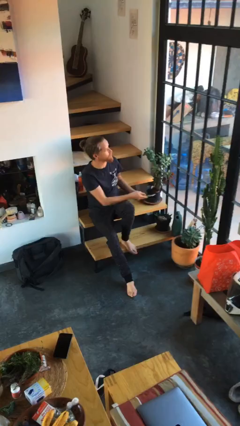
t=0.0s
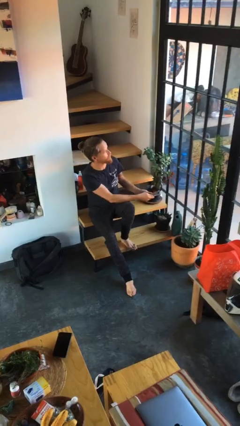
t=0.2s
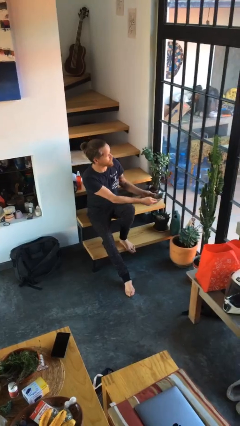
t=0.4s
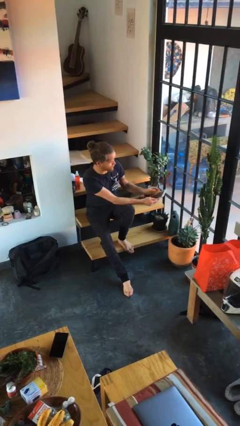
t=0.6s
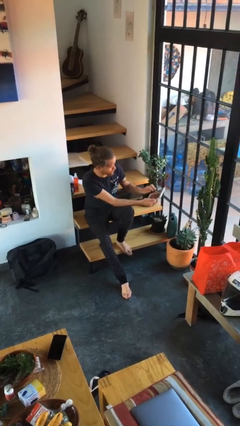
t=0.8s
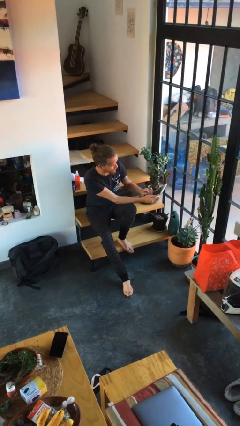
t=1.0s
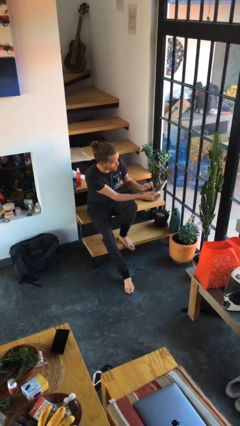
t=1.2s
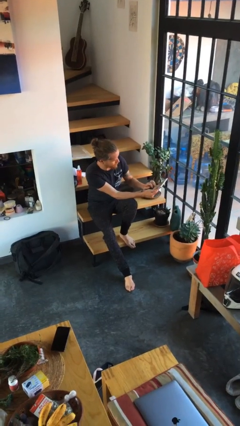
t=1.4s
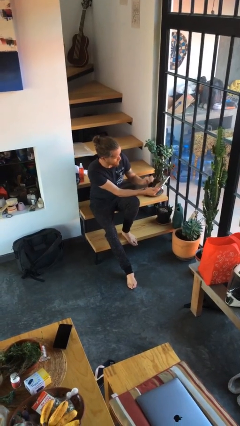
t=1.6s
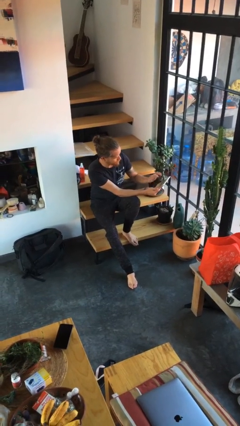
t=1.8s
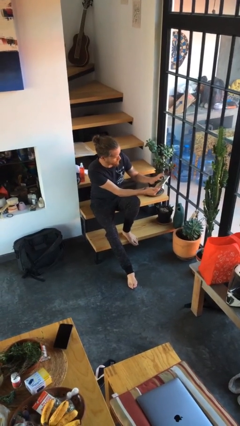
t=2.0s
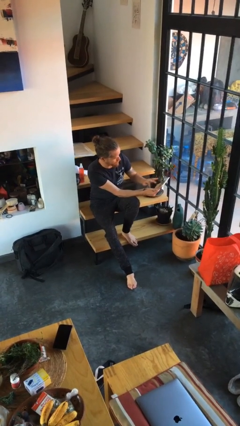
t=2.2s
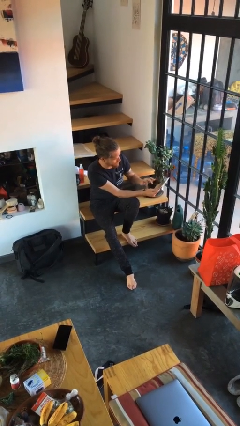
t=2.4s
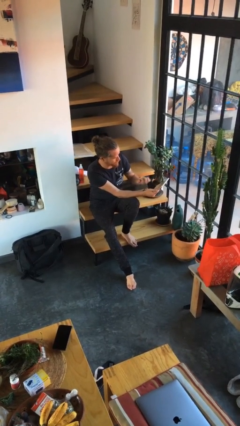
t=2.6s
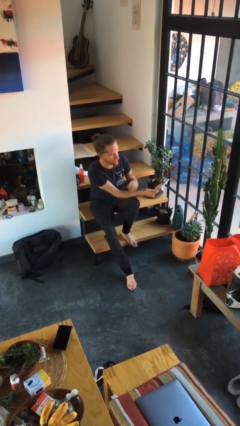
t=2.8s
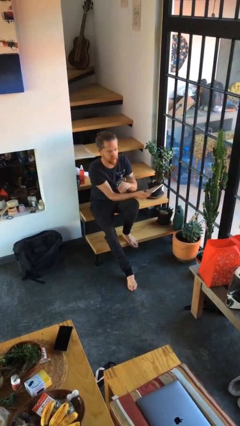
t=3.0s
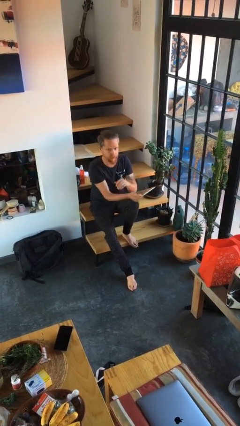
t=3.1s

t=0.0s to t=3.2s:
person interacts with tablet

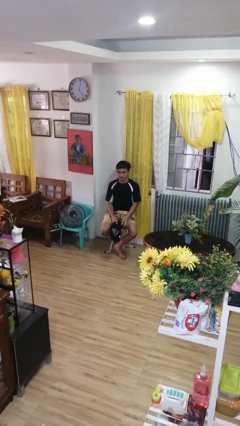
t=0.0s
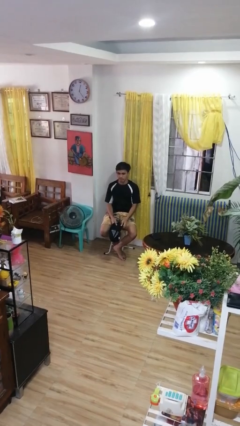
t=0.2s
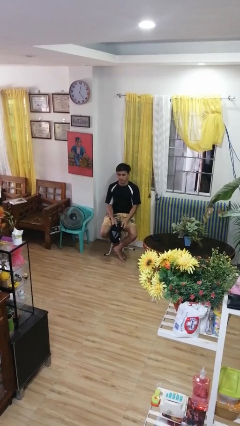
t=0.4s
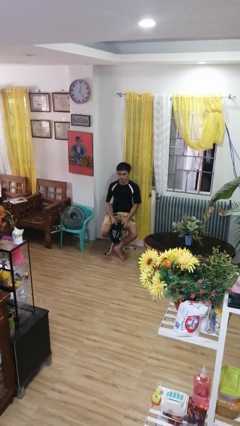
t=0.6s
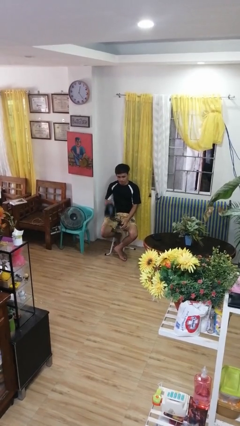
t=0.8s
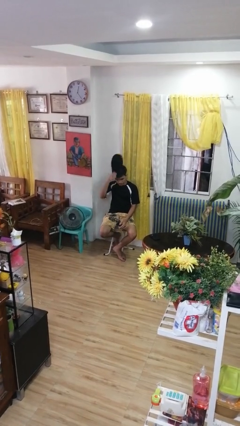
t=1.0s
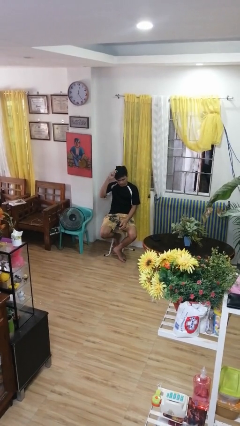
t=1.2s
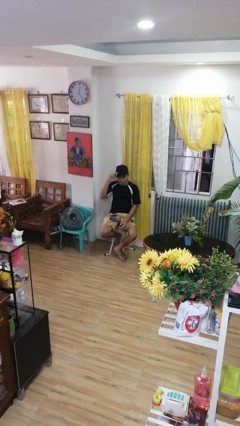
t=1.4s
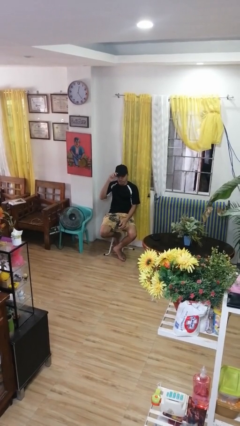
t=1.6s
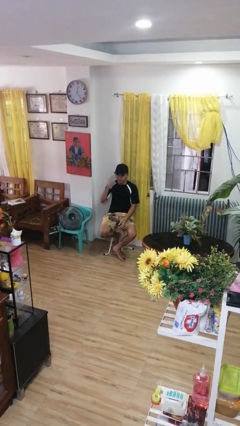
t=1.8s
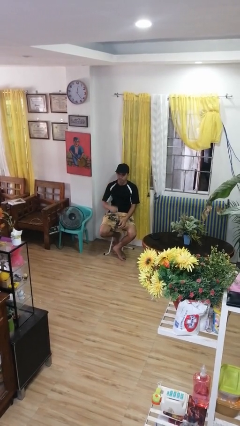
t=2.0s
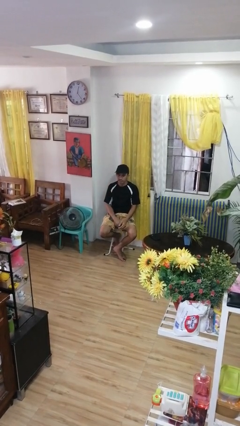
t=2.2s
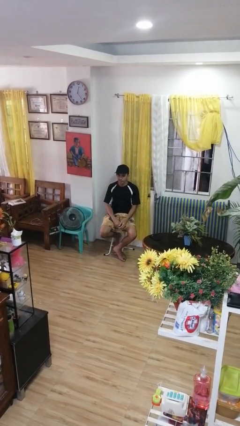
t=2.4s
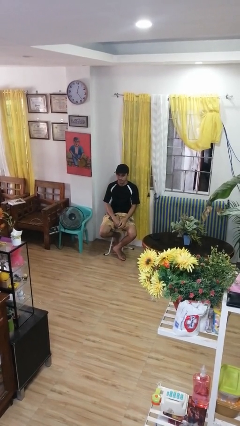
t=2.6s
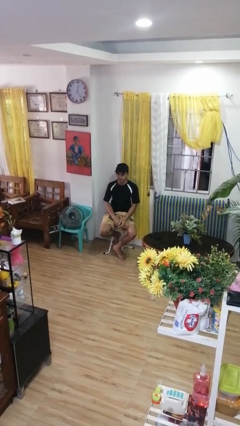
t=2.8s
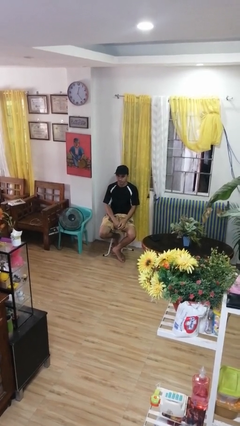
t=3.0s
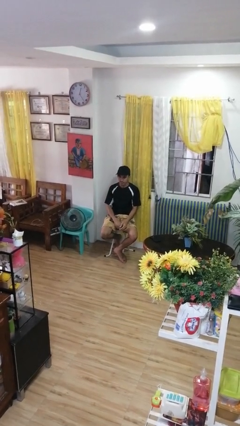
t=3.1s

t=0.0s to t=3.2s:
person puts on hat

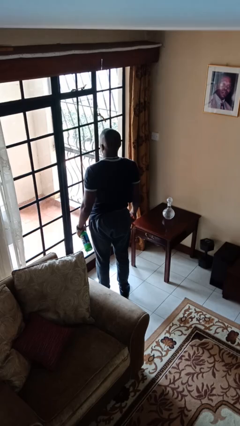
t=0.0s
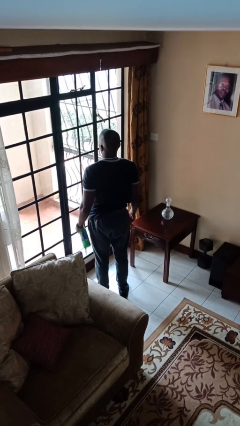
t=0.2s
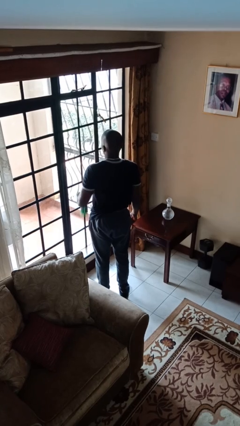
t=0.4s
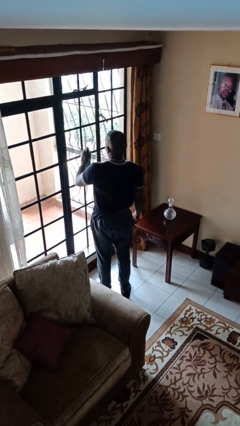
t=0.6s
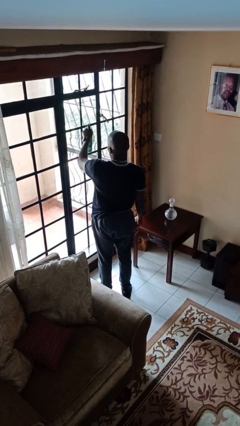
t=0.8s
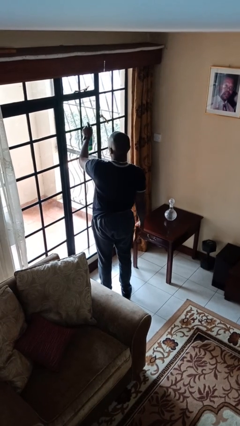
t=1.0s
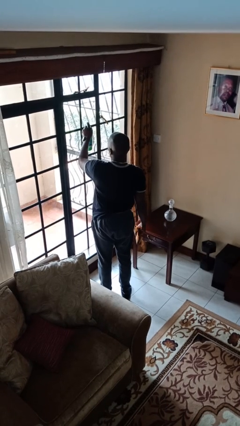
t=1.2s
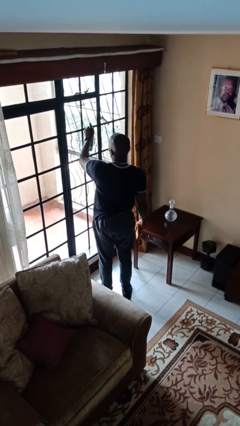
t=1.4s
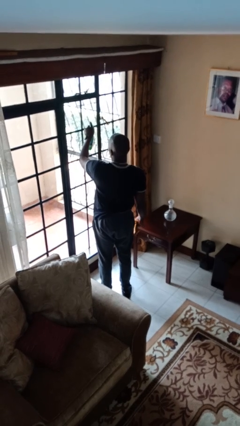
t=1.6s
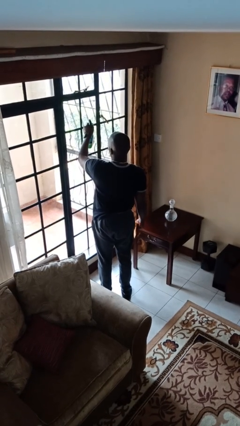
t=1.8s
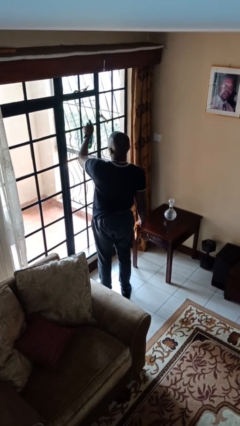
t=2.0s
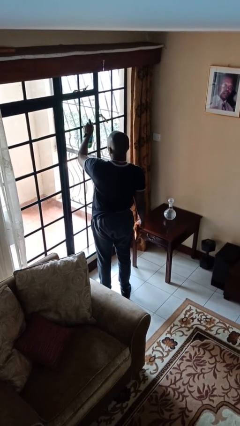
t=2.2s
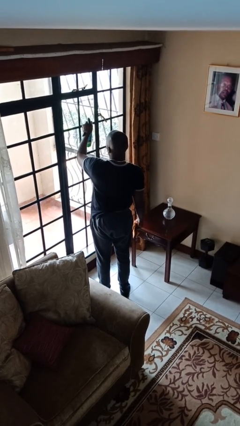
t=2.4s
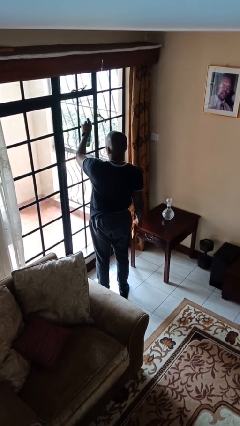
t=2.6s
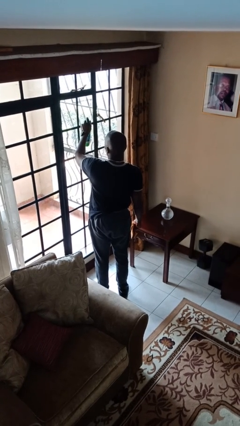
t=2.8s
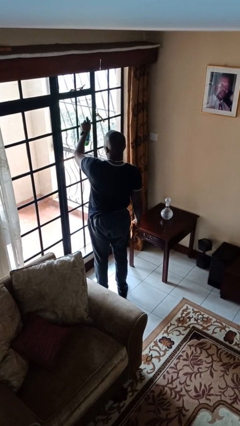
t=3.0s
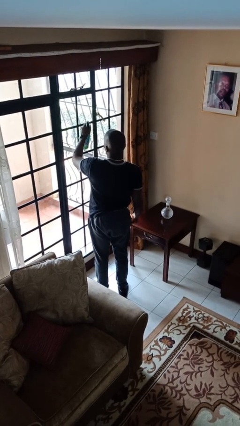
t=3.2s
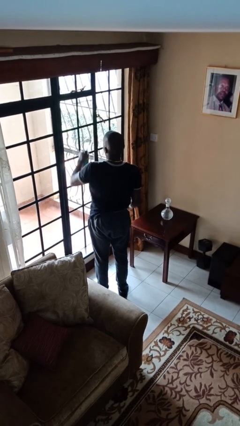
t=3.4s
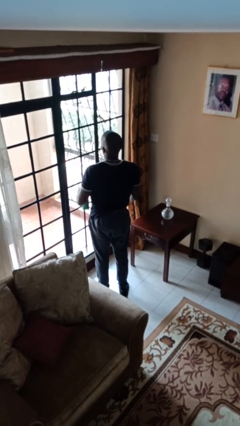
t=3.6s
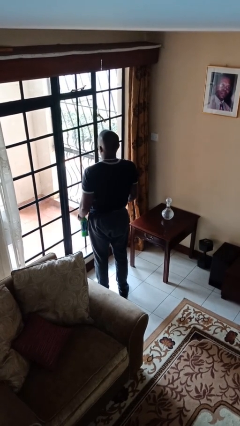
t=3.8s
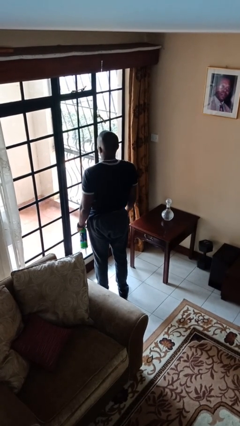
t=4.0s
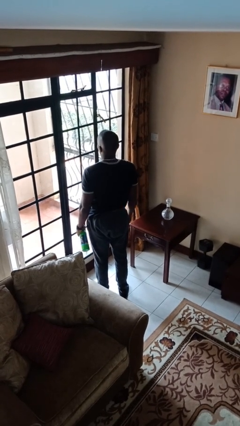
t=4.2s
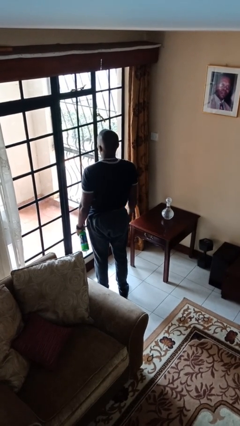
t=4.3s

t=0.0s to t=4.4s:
person sprays from bottle

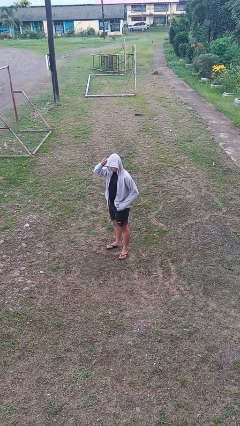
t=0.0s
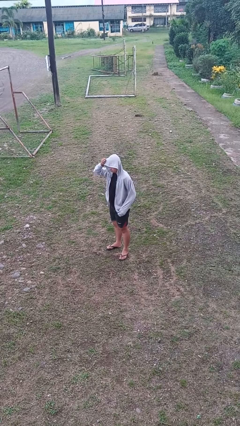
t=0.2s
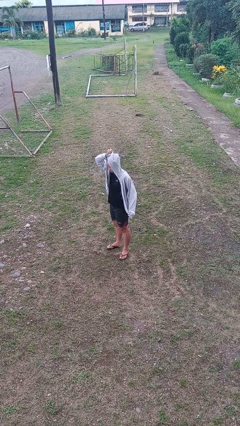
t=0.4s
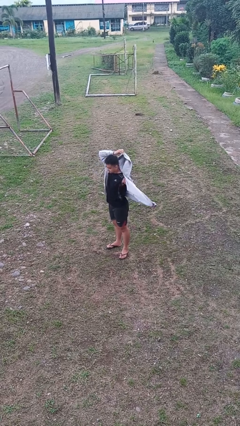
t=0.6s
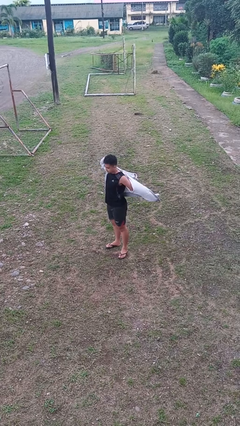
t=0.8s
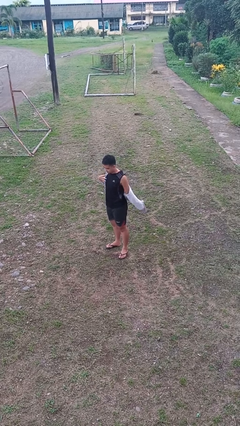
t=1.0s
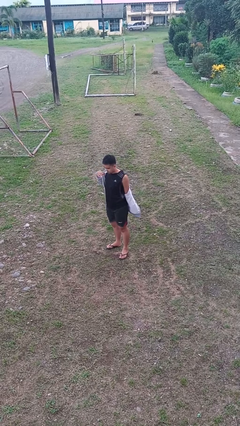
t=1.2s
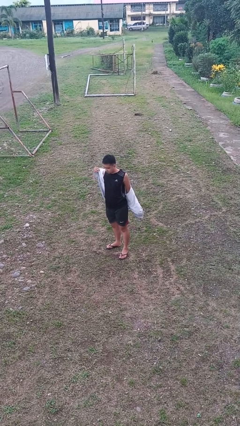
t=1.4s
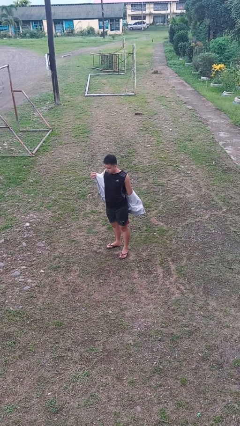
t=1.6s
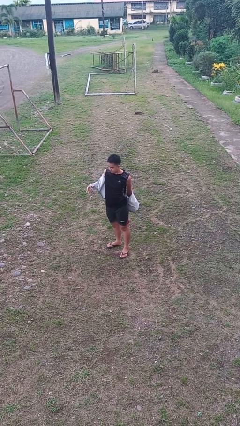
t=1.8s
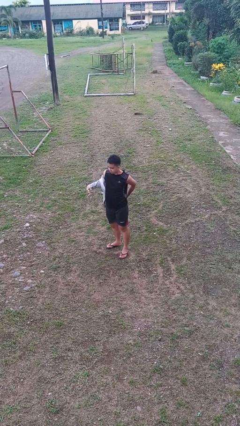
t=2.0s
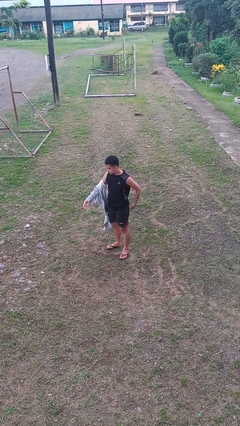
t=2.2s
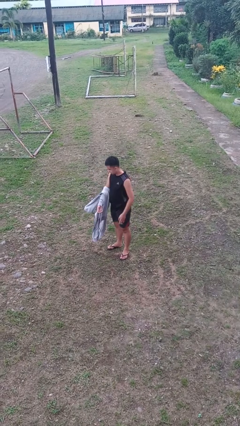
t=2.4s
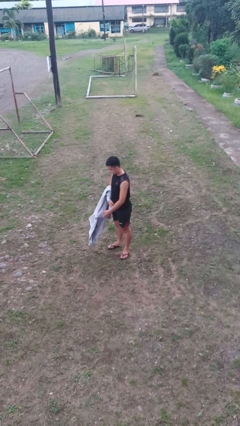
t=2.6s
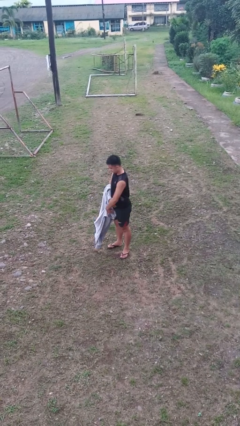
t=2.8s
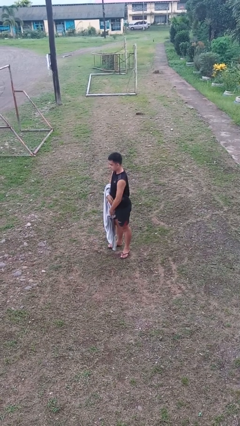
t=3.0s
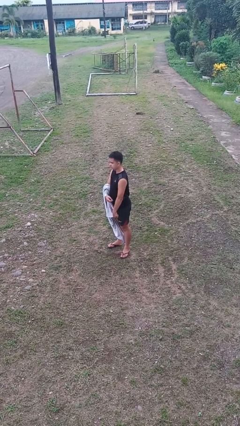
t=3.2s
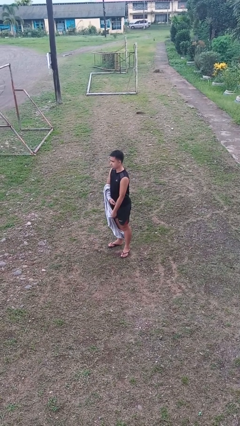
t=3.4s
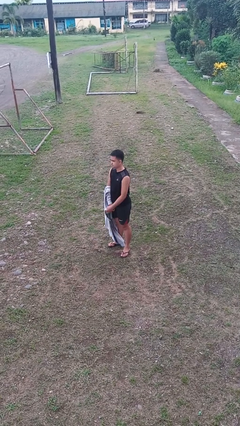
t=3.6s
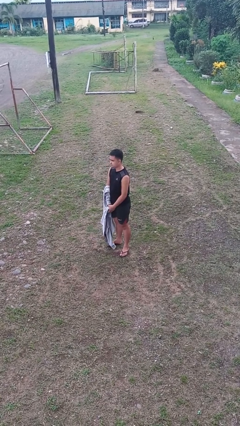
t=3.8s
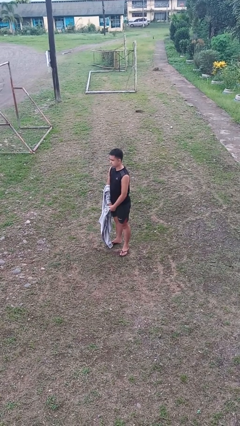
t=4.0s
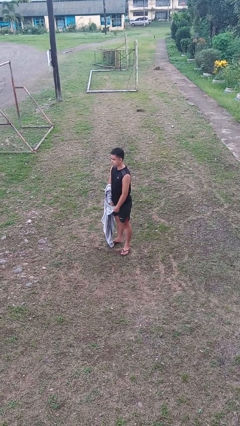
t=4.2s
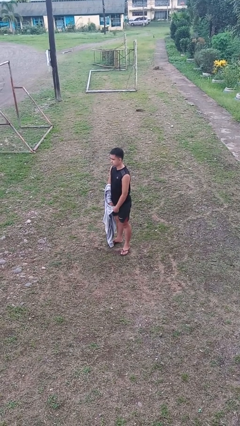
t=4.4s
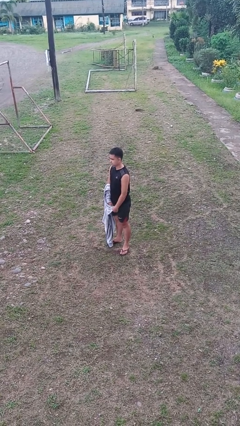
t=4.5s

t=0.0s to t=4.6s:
person takes off hoodie

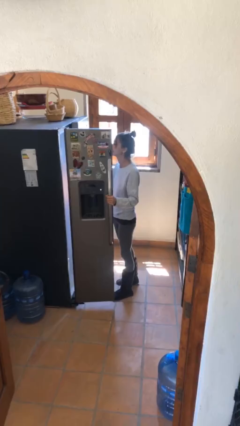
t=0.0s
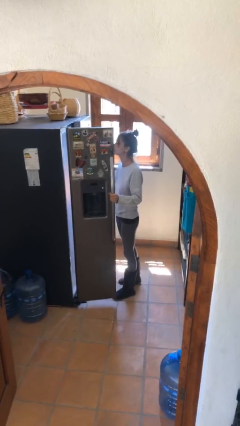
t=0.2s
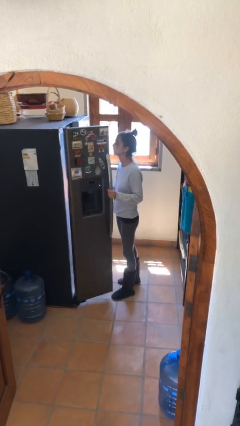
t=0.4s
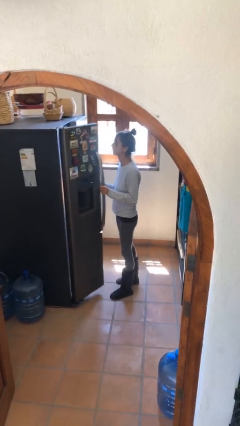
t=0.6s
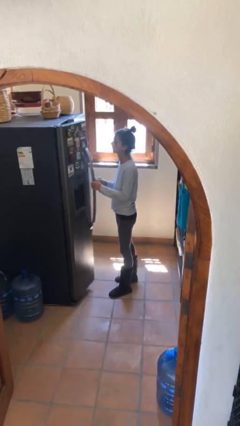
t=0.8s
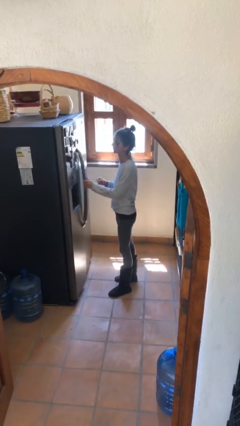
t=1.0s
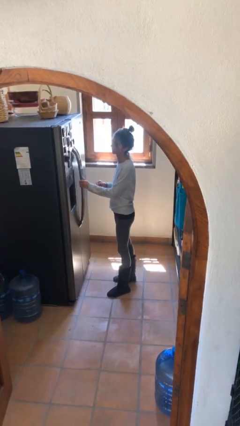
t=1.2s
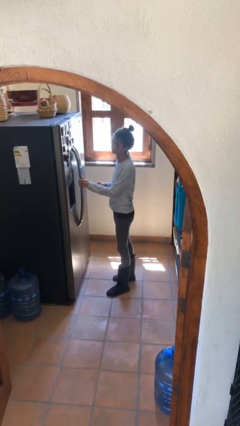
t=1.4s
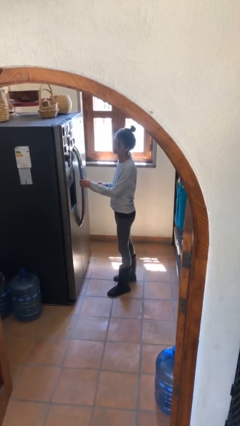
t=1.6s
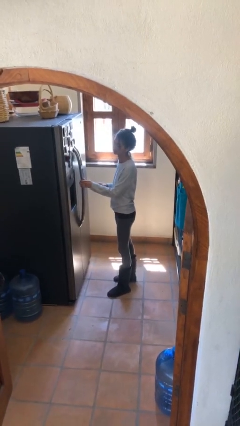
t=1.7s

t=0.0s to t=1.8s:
person closes refrigerator

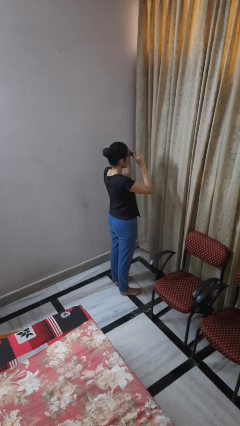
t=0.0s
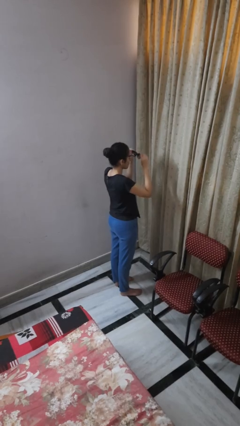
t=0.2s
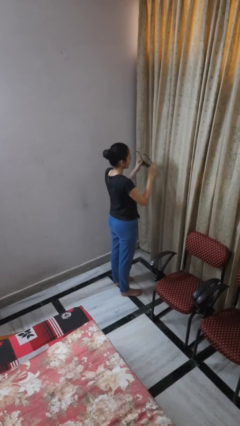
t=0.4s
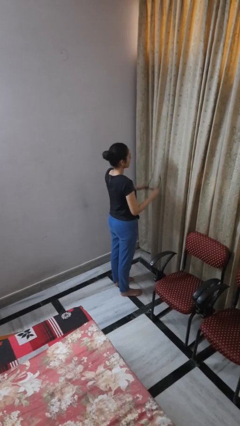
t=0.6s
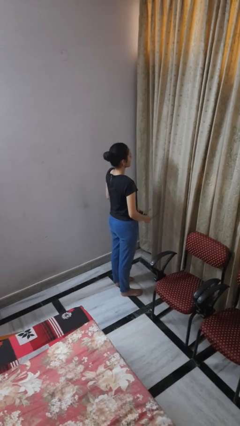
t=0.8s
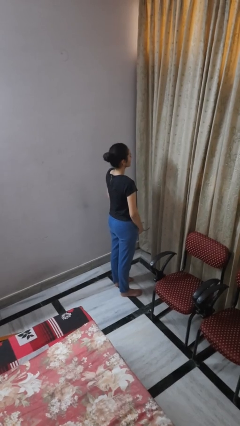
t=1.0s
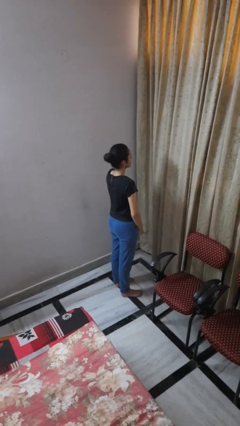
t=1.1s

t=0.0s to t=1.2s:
person takes off sunglasses
